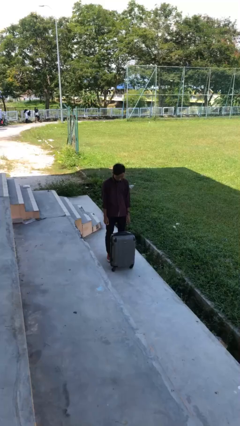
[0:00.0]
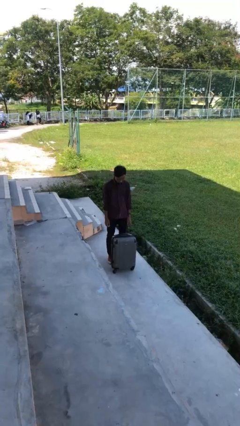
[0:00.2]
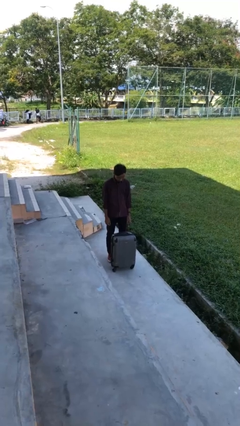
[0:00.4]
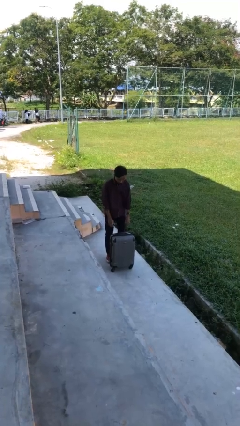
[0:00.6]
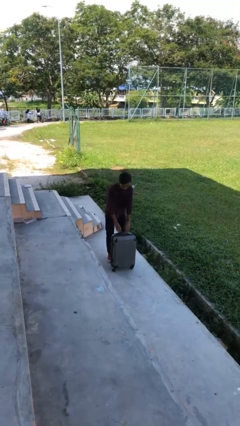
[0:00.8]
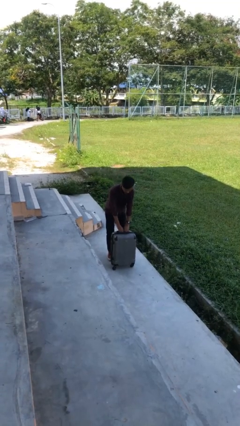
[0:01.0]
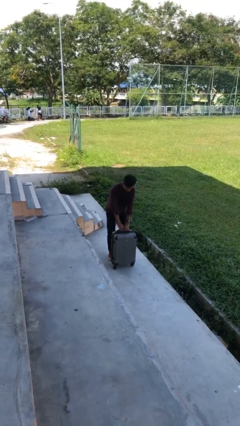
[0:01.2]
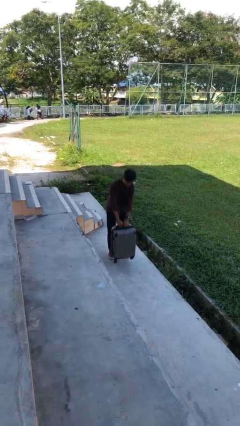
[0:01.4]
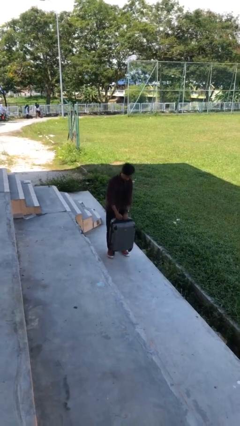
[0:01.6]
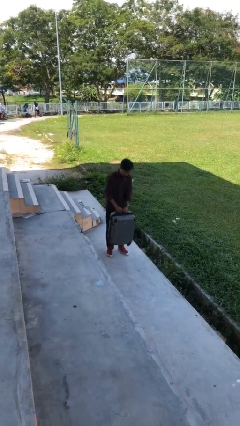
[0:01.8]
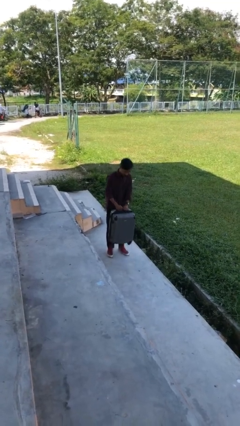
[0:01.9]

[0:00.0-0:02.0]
person picks up object from floor

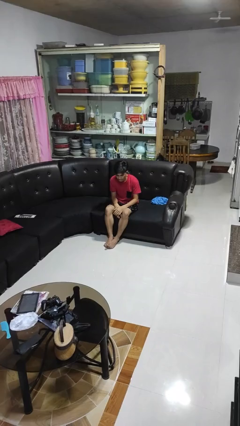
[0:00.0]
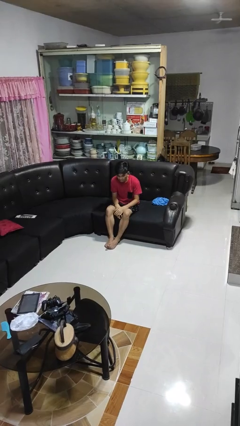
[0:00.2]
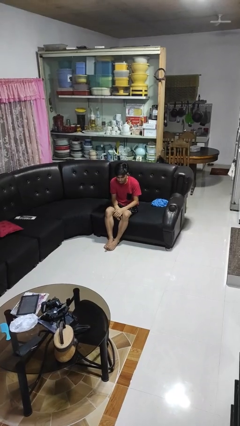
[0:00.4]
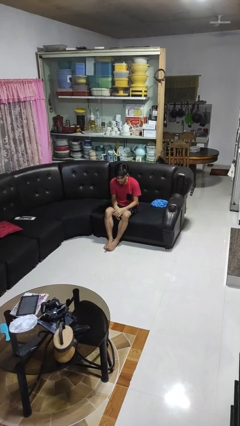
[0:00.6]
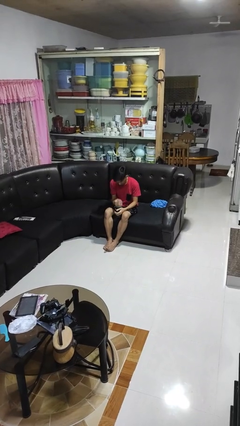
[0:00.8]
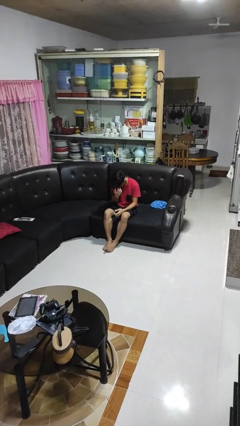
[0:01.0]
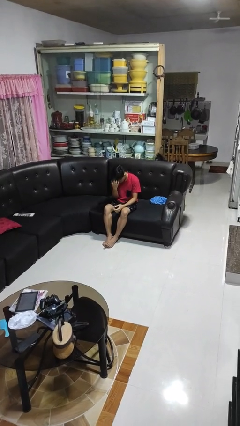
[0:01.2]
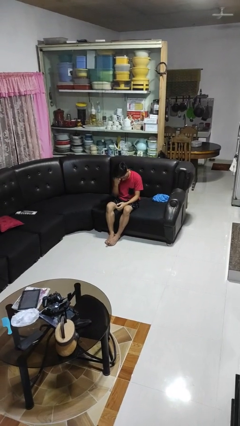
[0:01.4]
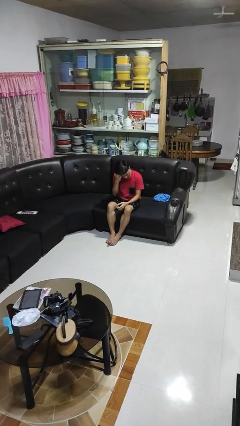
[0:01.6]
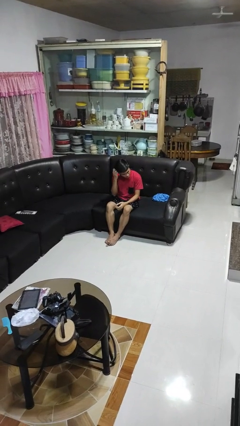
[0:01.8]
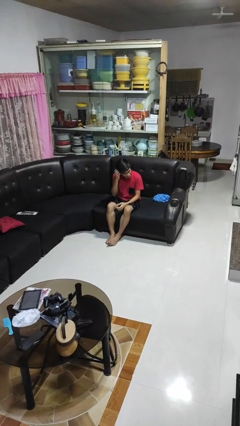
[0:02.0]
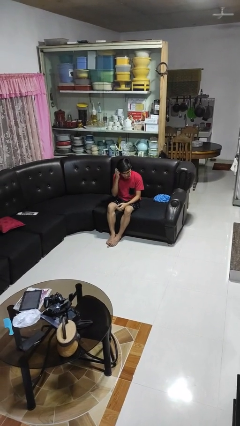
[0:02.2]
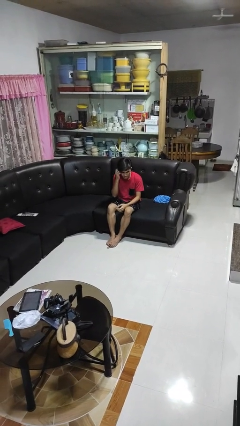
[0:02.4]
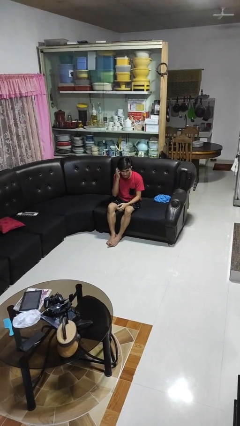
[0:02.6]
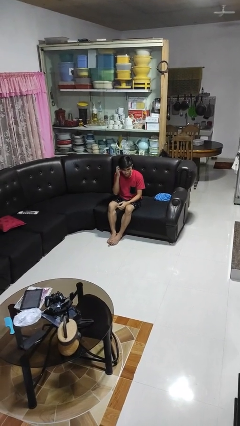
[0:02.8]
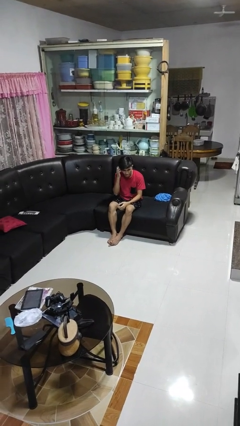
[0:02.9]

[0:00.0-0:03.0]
person scratches face

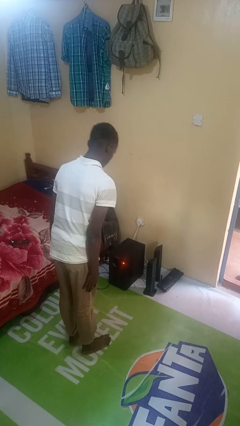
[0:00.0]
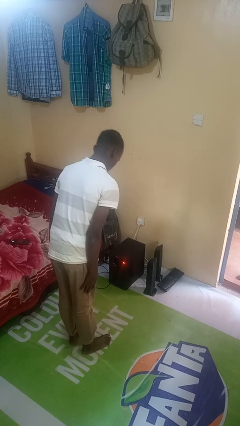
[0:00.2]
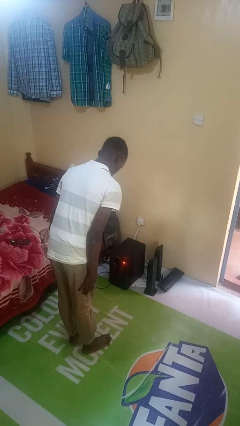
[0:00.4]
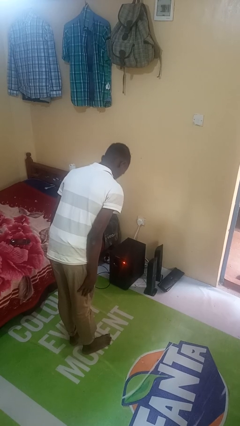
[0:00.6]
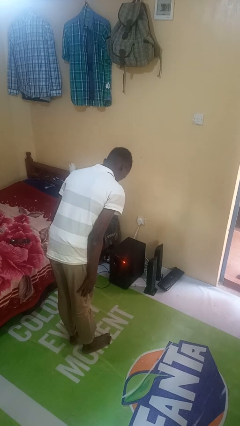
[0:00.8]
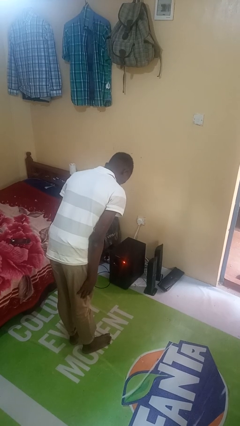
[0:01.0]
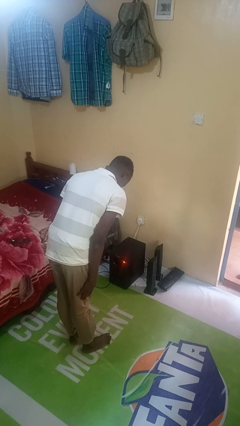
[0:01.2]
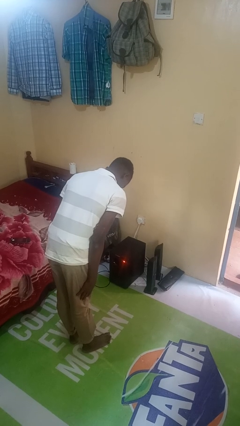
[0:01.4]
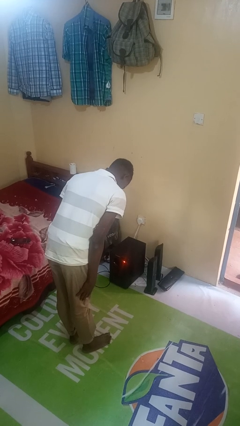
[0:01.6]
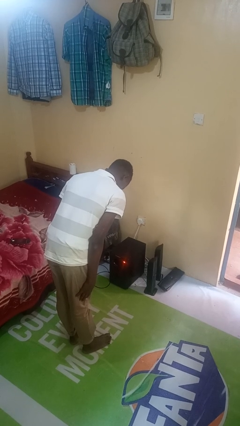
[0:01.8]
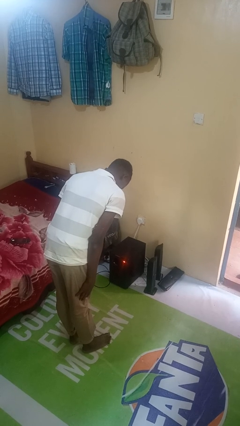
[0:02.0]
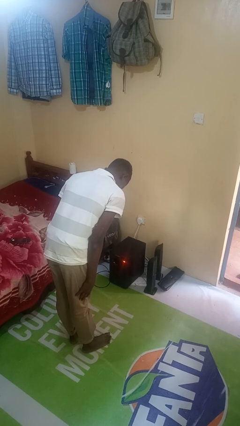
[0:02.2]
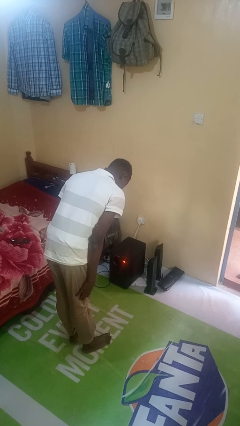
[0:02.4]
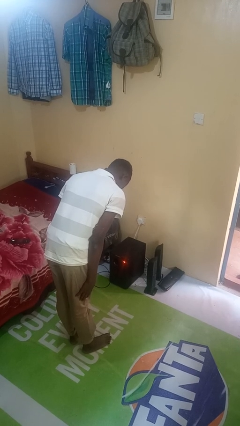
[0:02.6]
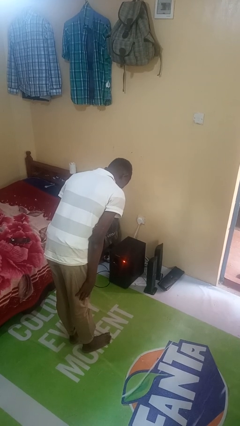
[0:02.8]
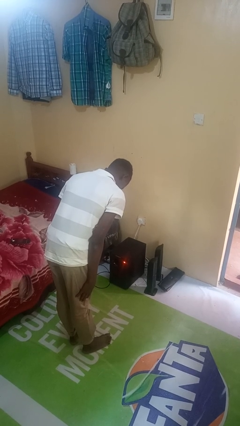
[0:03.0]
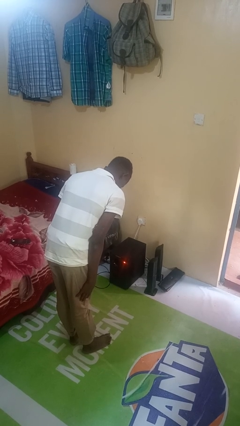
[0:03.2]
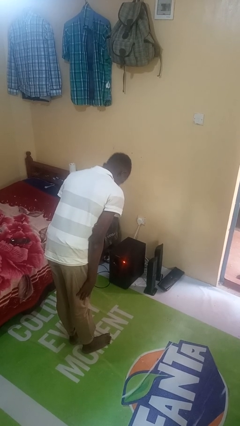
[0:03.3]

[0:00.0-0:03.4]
person bows

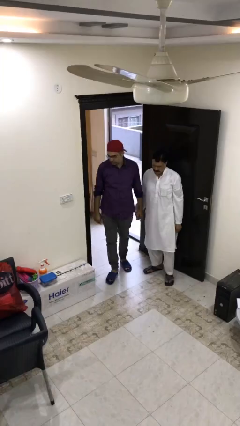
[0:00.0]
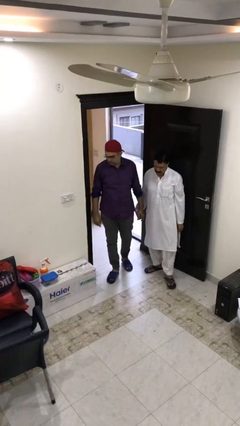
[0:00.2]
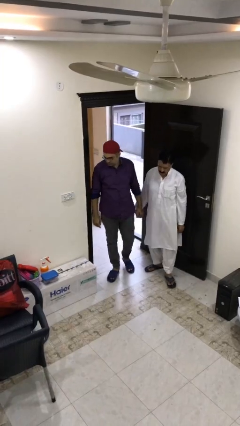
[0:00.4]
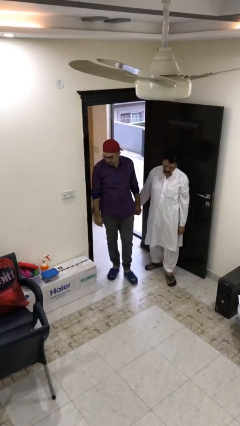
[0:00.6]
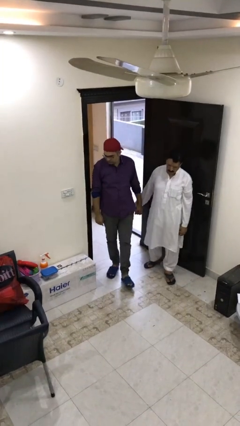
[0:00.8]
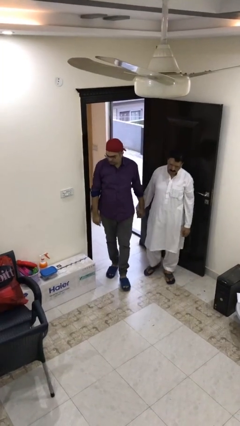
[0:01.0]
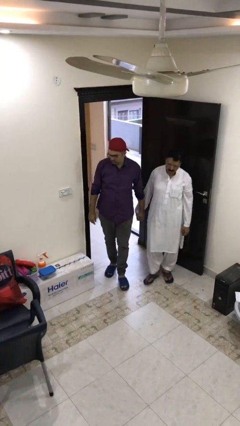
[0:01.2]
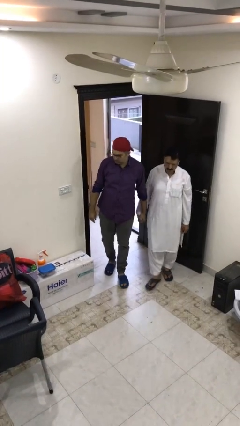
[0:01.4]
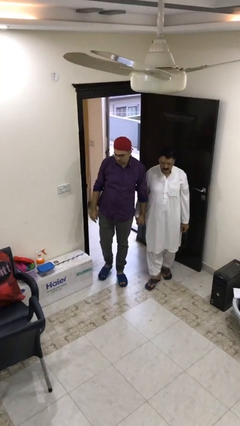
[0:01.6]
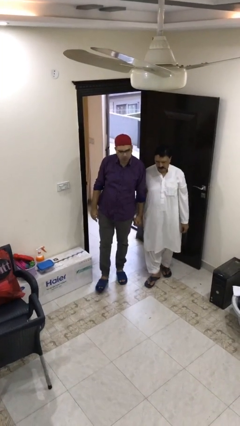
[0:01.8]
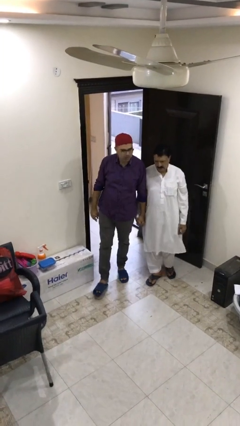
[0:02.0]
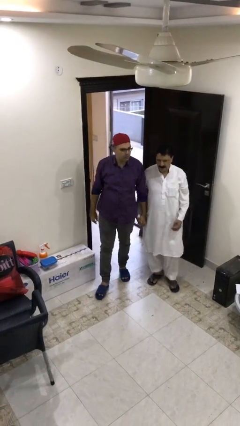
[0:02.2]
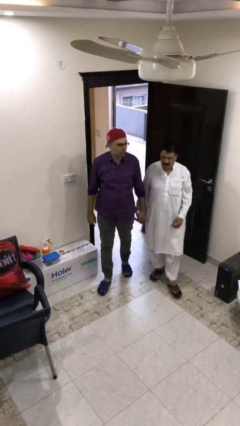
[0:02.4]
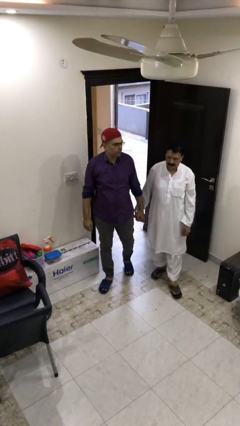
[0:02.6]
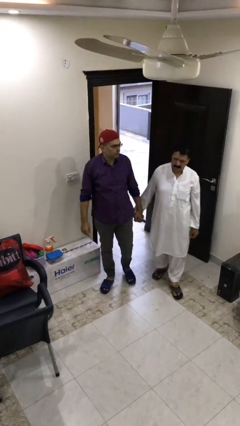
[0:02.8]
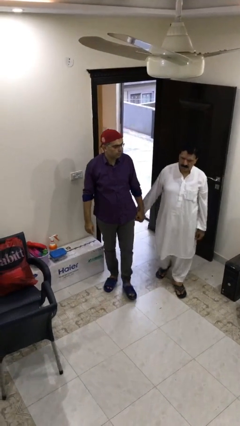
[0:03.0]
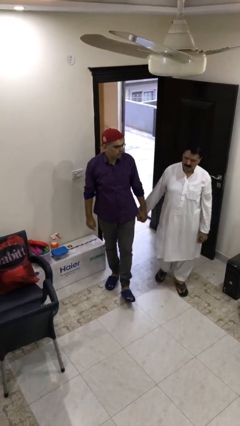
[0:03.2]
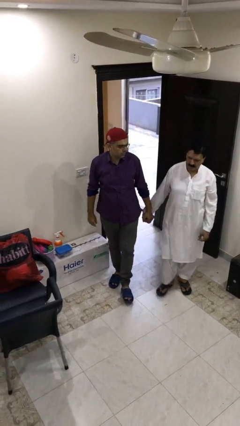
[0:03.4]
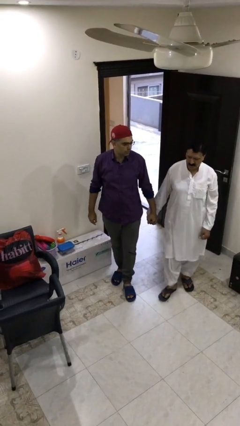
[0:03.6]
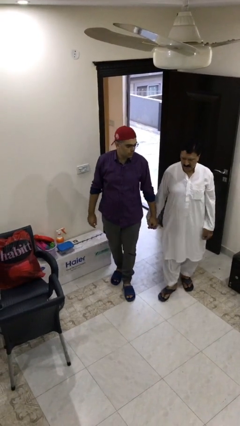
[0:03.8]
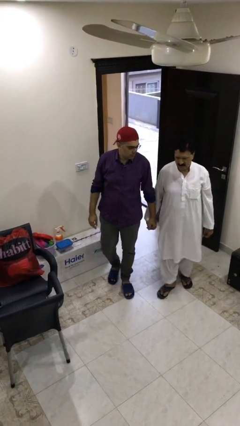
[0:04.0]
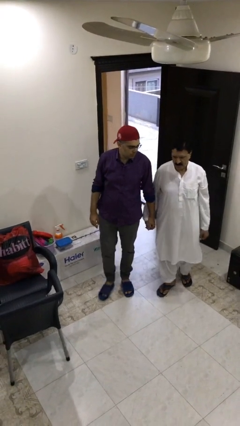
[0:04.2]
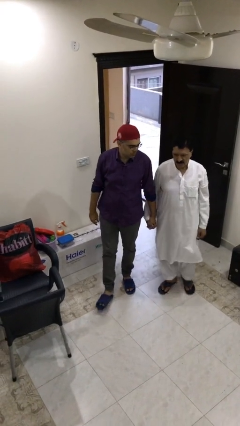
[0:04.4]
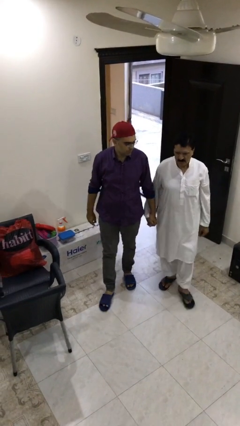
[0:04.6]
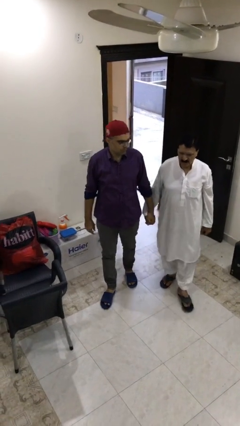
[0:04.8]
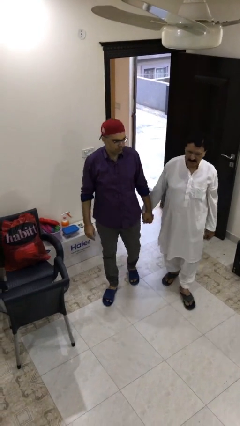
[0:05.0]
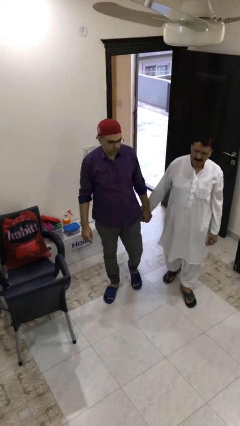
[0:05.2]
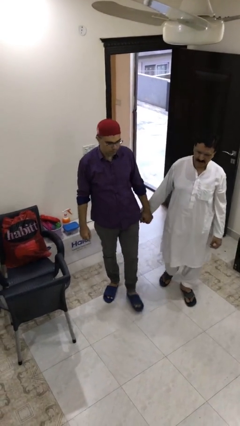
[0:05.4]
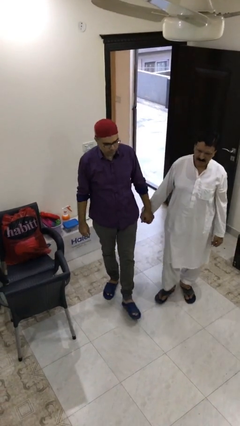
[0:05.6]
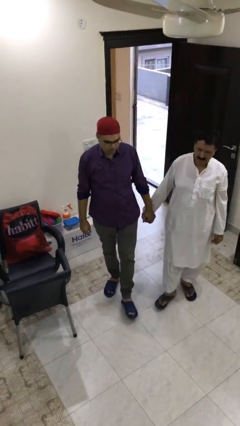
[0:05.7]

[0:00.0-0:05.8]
person holds hand

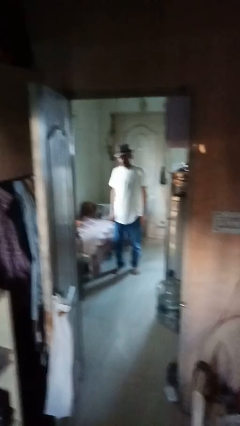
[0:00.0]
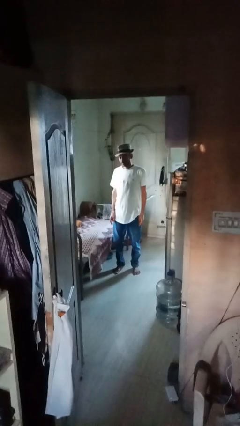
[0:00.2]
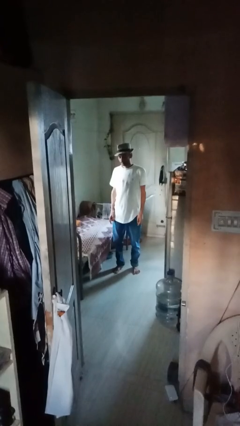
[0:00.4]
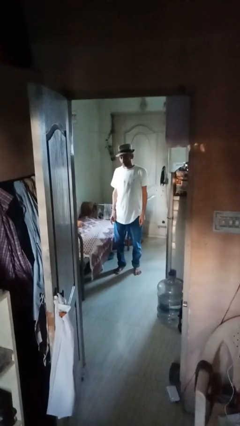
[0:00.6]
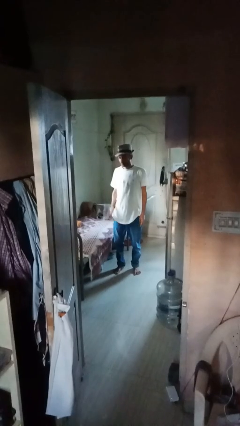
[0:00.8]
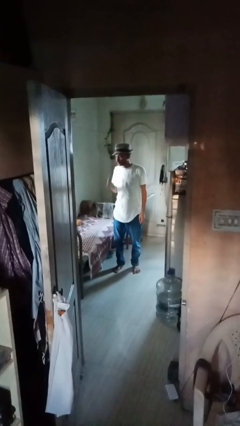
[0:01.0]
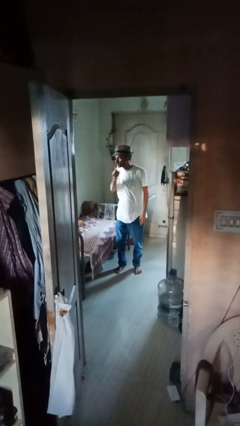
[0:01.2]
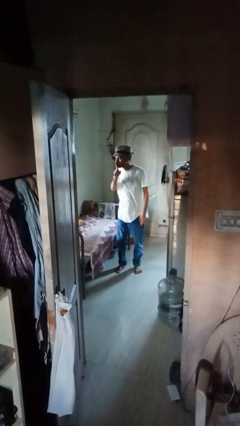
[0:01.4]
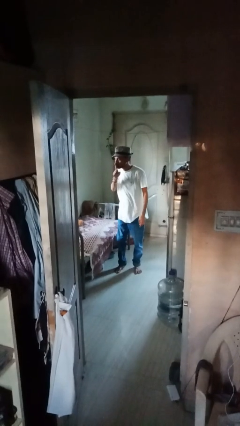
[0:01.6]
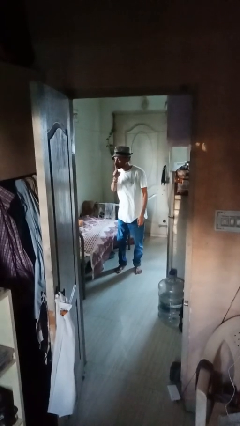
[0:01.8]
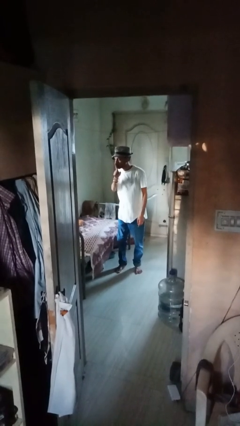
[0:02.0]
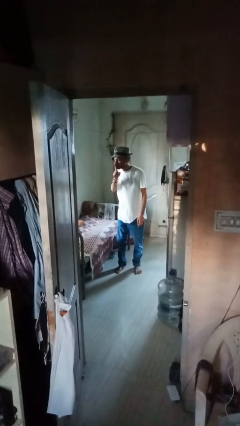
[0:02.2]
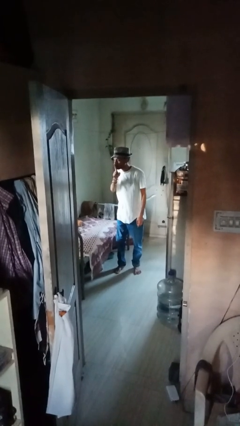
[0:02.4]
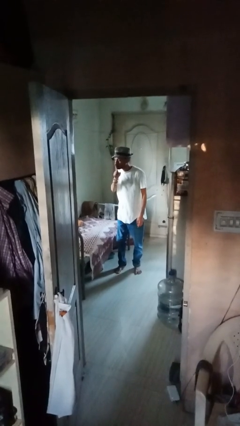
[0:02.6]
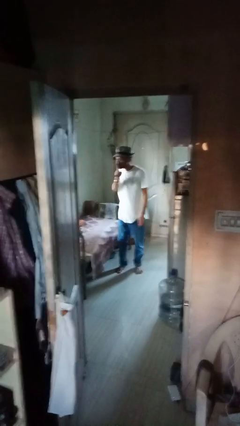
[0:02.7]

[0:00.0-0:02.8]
person gestures be quiet

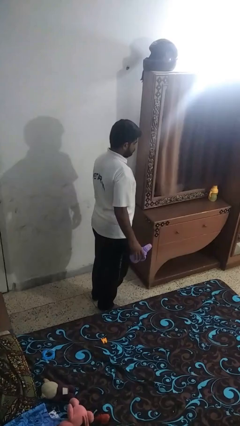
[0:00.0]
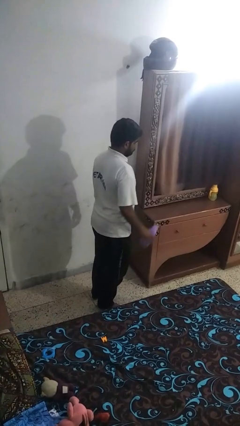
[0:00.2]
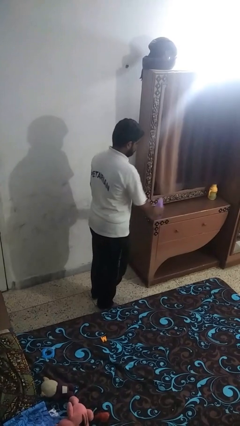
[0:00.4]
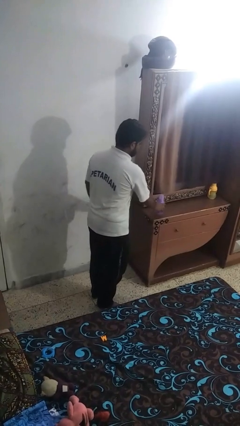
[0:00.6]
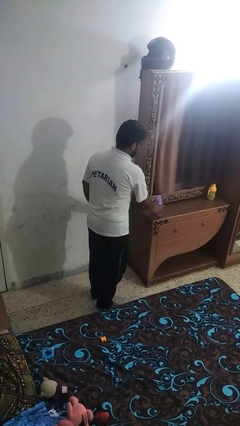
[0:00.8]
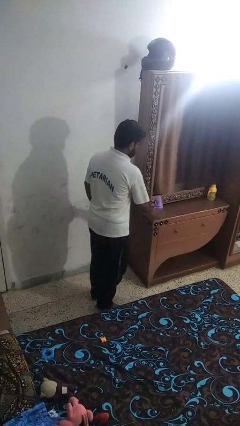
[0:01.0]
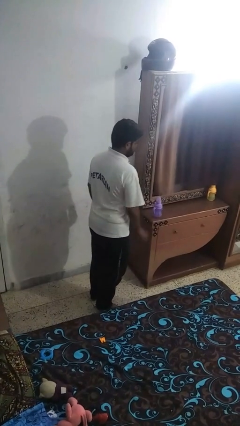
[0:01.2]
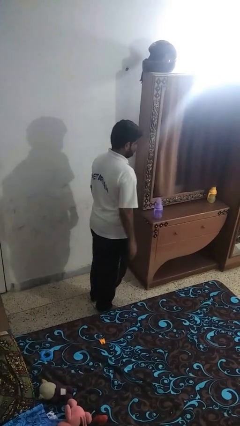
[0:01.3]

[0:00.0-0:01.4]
person puts down object on countertop
